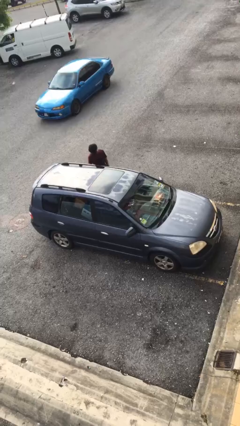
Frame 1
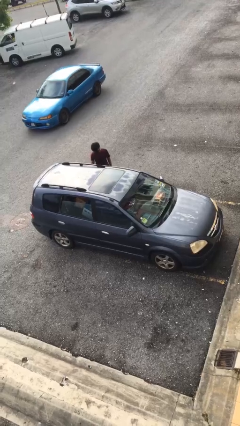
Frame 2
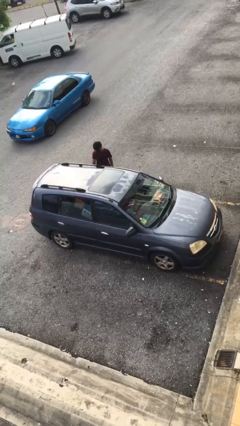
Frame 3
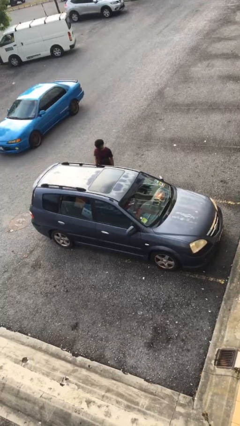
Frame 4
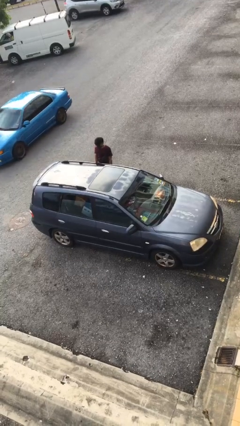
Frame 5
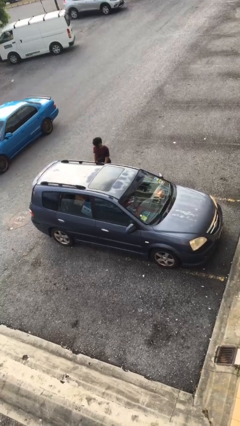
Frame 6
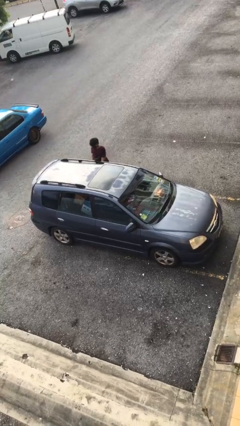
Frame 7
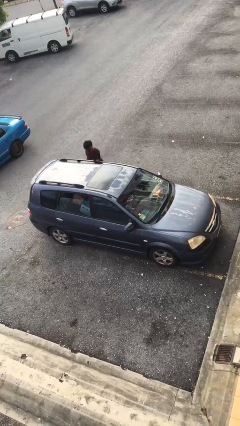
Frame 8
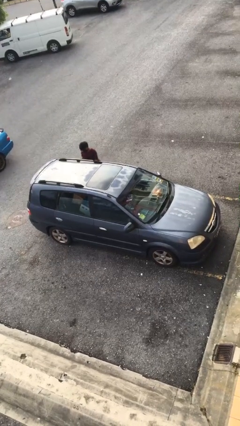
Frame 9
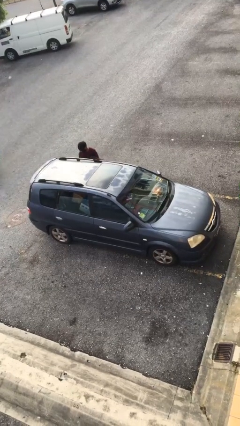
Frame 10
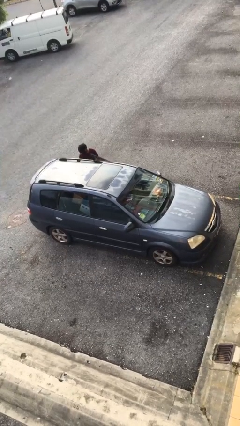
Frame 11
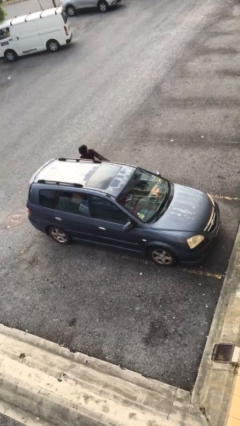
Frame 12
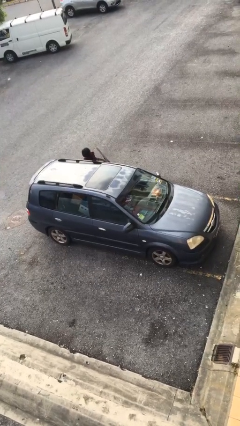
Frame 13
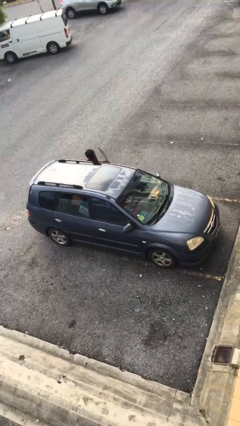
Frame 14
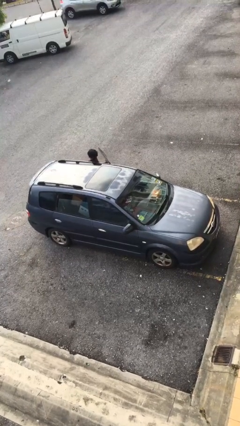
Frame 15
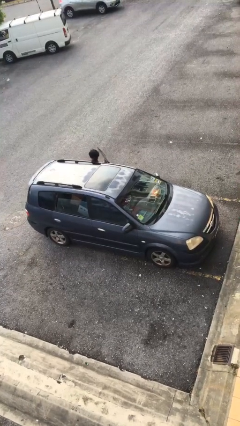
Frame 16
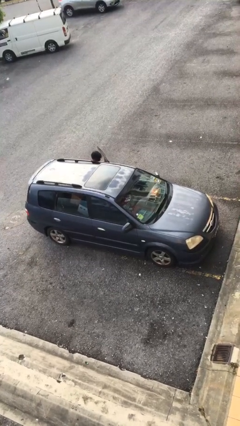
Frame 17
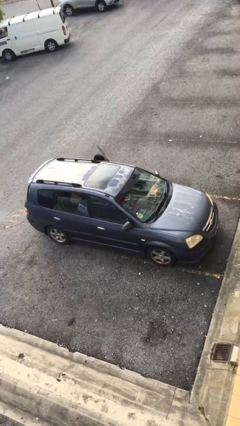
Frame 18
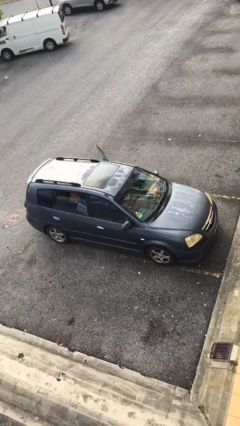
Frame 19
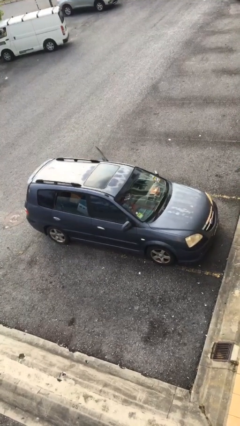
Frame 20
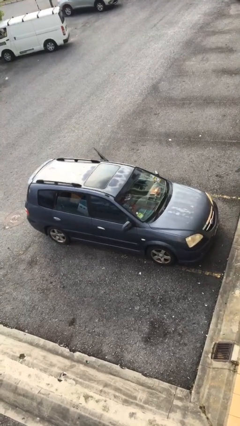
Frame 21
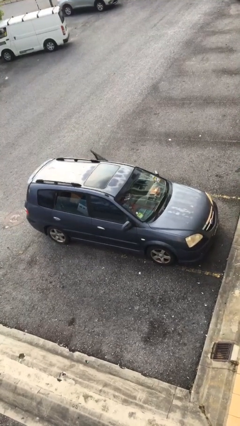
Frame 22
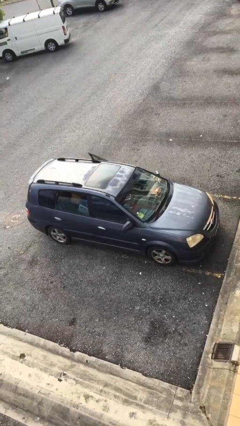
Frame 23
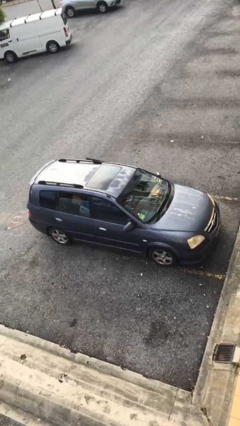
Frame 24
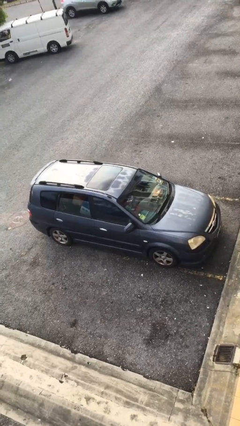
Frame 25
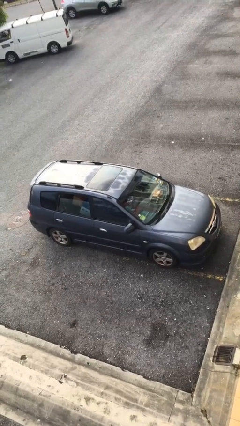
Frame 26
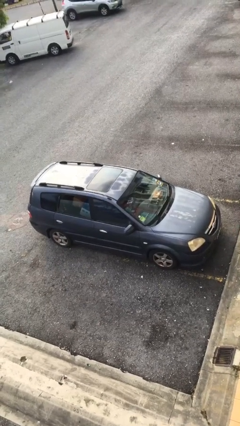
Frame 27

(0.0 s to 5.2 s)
car picks up person

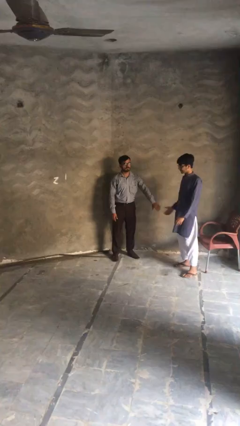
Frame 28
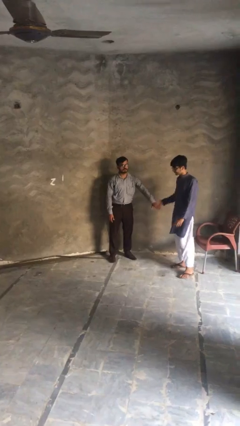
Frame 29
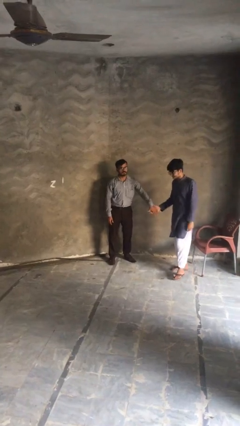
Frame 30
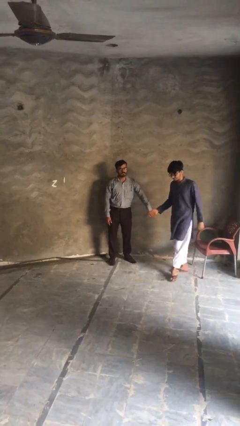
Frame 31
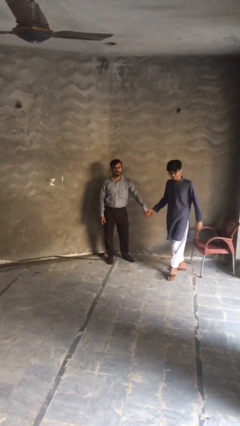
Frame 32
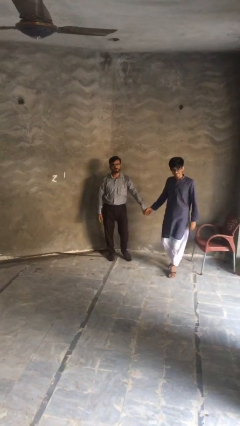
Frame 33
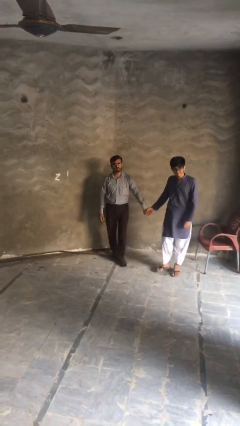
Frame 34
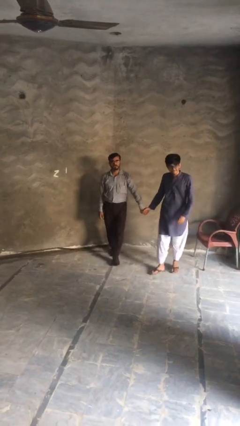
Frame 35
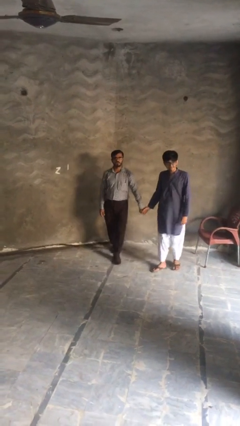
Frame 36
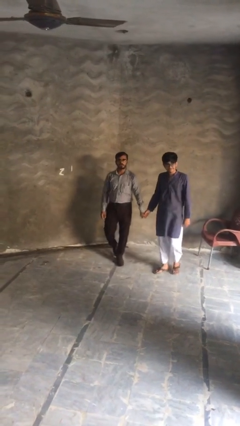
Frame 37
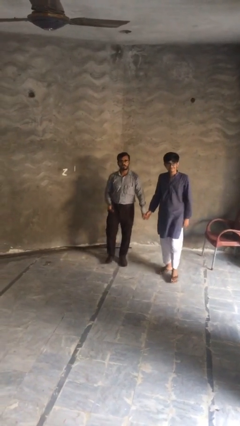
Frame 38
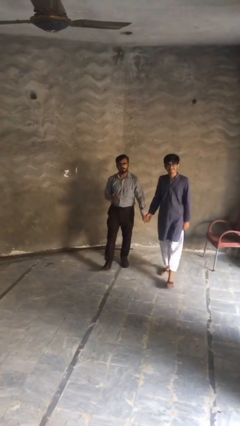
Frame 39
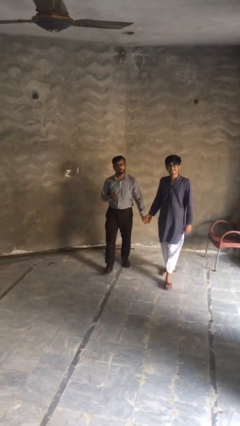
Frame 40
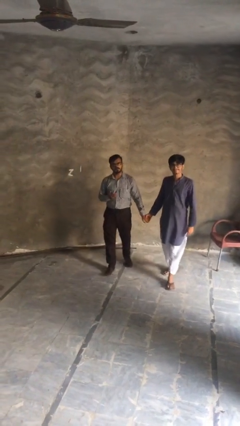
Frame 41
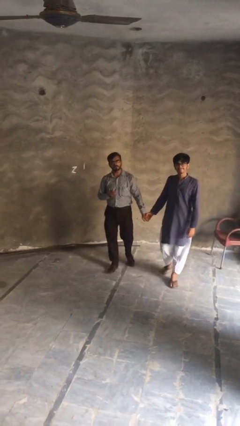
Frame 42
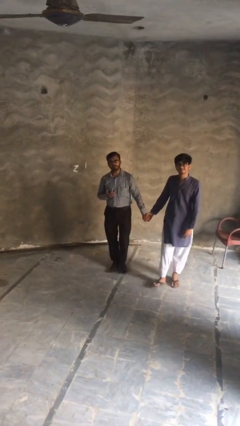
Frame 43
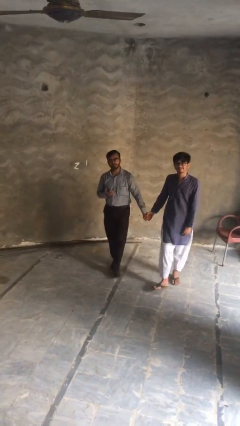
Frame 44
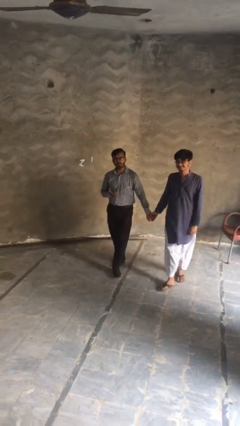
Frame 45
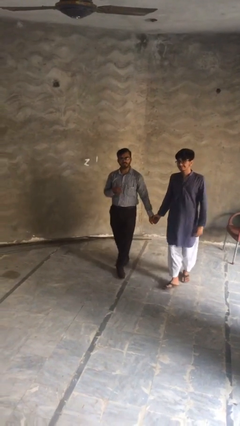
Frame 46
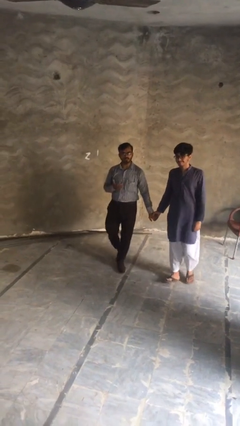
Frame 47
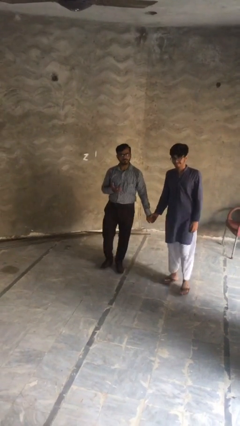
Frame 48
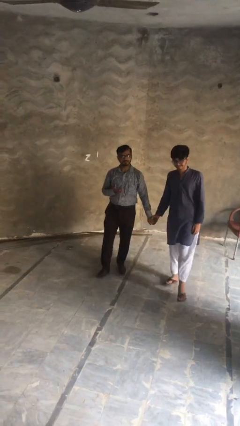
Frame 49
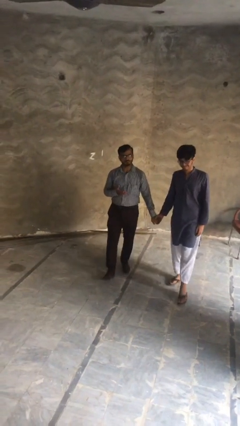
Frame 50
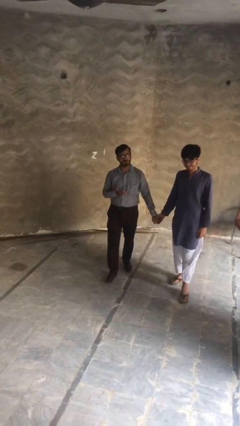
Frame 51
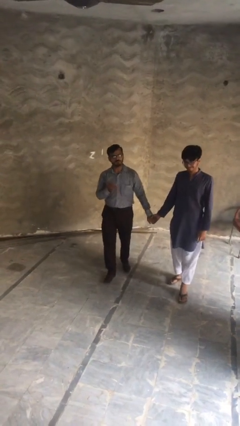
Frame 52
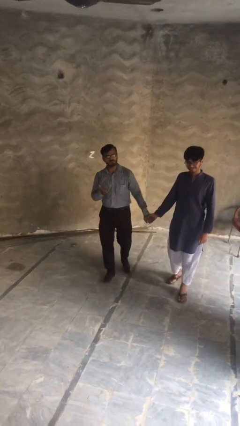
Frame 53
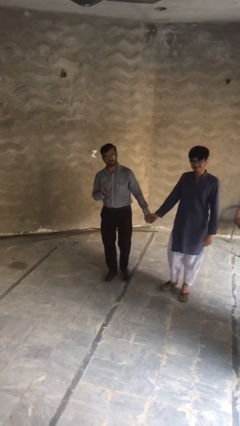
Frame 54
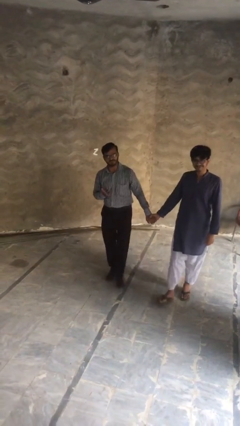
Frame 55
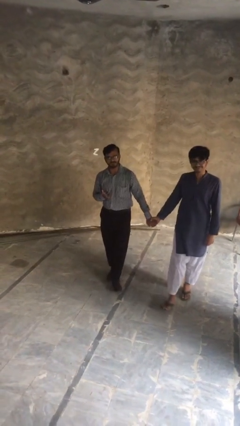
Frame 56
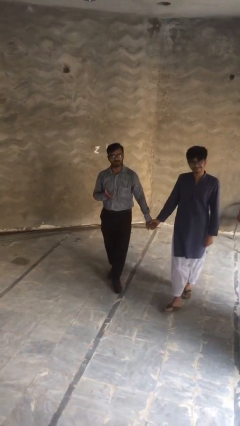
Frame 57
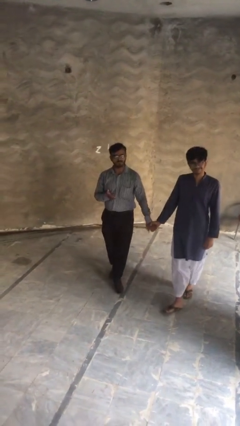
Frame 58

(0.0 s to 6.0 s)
person holds hand

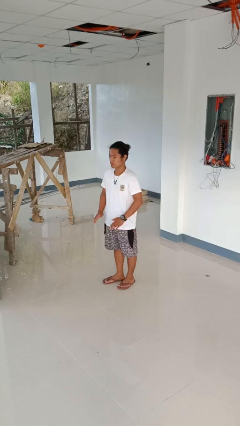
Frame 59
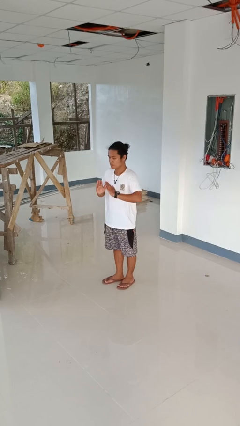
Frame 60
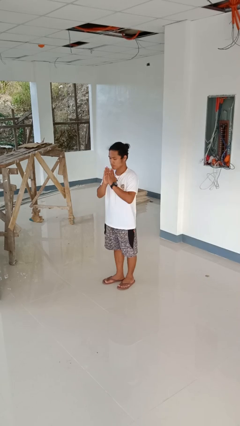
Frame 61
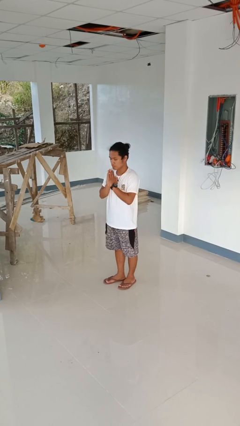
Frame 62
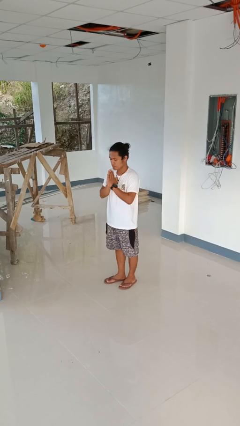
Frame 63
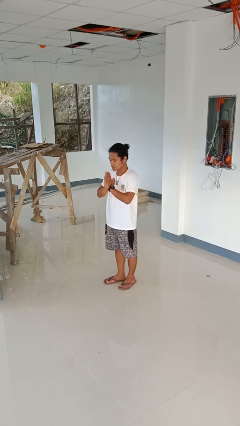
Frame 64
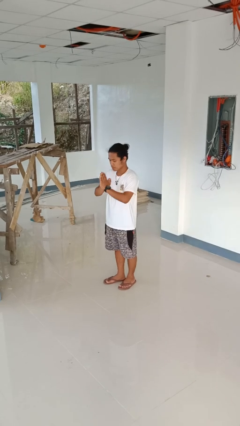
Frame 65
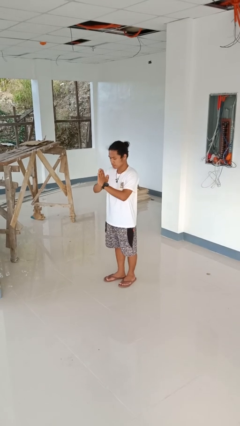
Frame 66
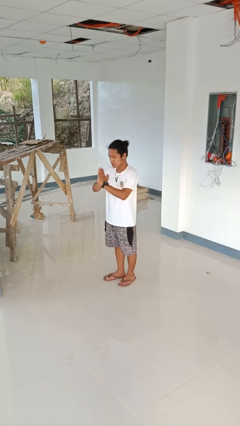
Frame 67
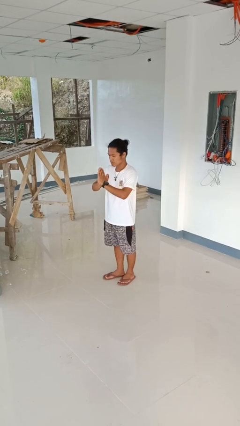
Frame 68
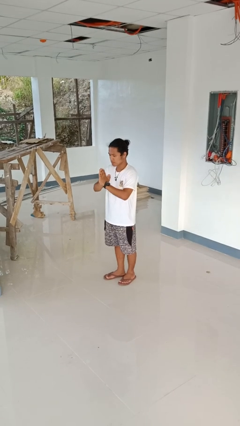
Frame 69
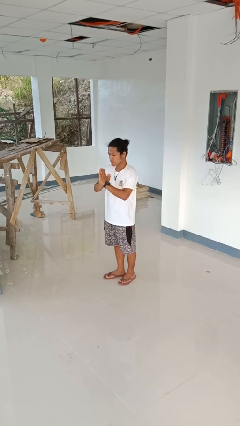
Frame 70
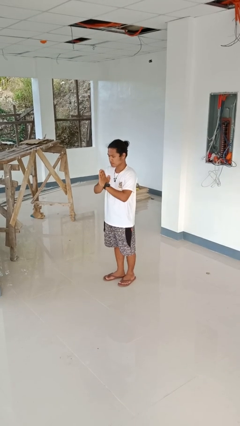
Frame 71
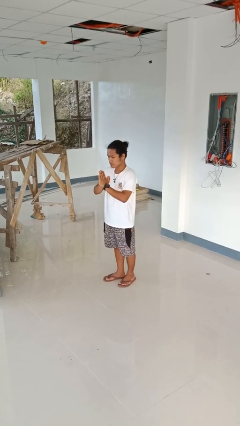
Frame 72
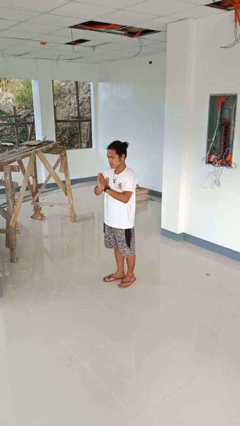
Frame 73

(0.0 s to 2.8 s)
person prays

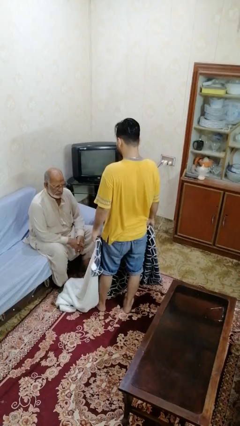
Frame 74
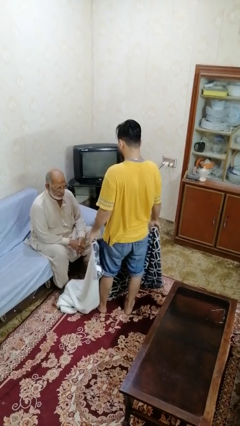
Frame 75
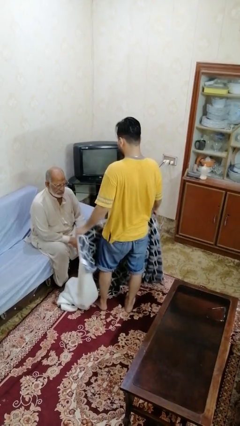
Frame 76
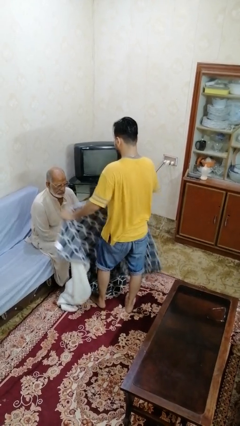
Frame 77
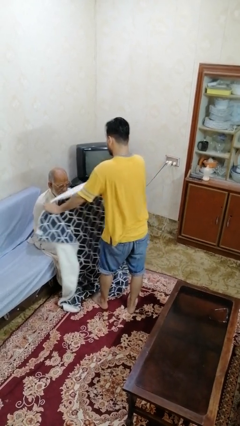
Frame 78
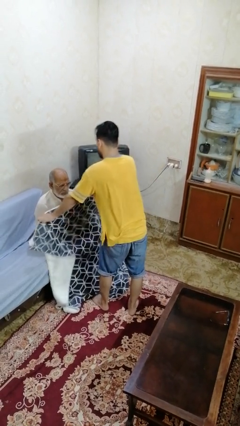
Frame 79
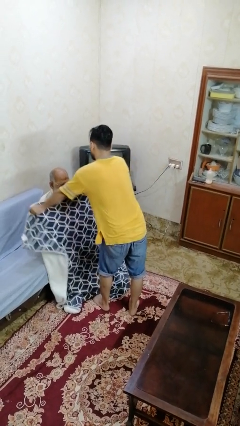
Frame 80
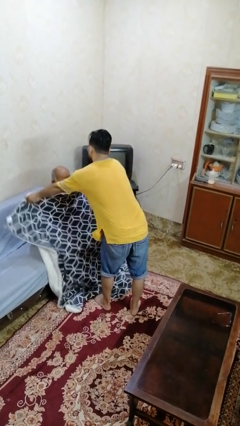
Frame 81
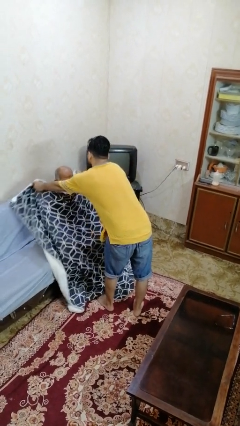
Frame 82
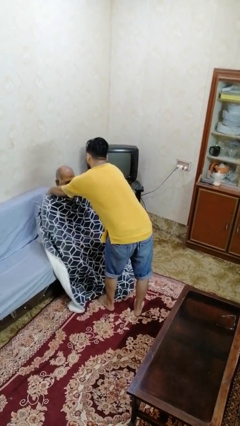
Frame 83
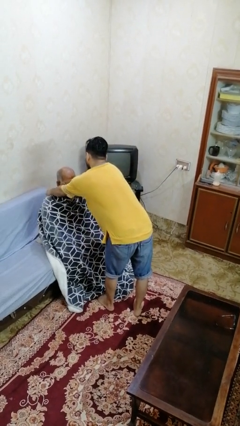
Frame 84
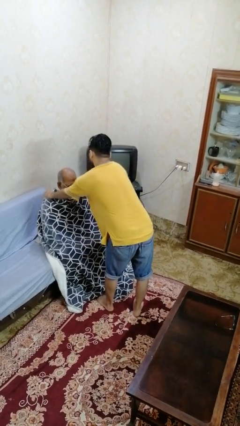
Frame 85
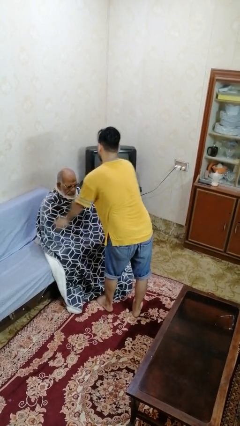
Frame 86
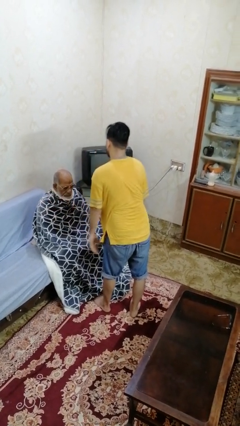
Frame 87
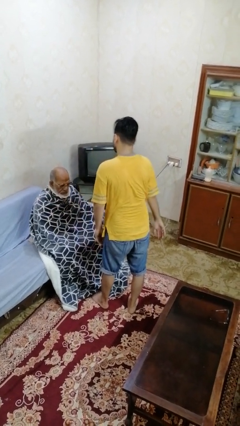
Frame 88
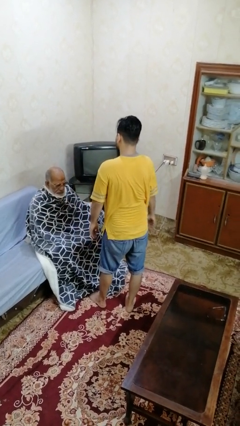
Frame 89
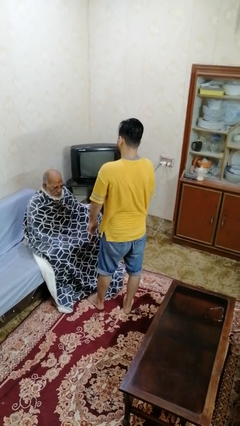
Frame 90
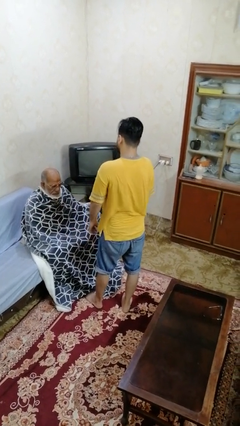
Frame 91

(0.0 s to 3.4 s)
person covers friend with blanket

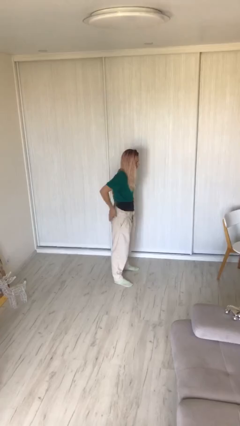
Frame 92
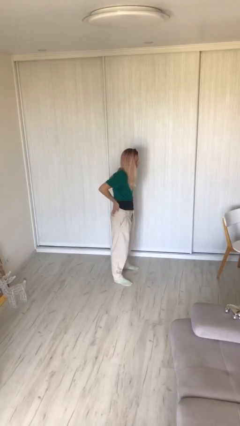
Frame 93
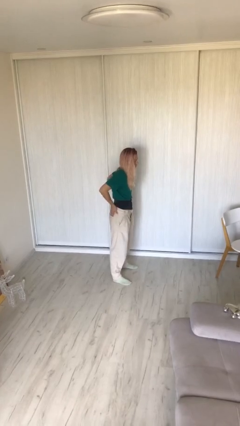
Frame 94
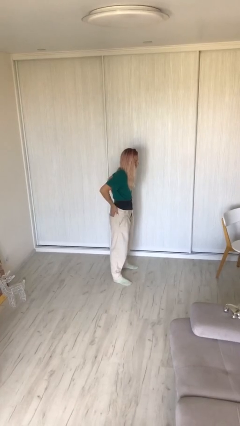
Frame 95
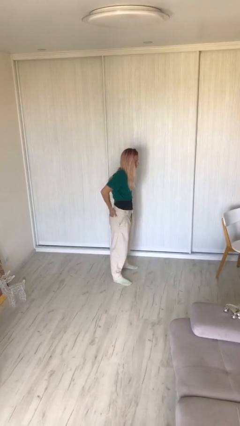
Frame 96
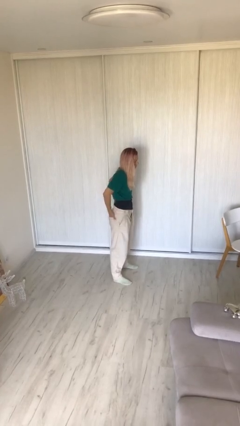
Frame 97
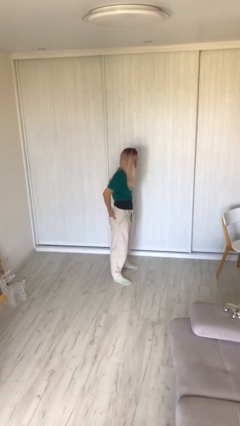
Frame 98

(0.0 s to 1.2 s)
person puts hands in back pockets
